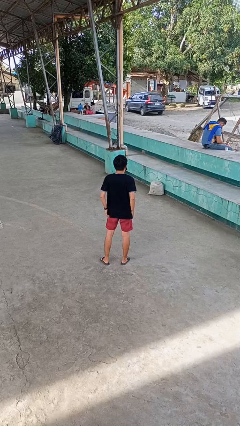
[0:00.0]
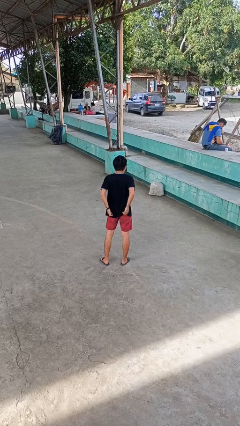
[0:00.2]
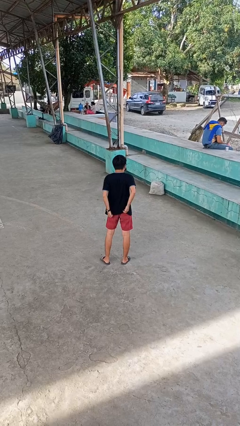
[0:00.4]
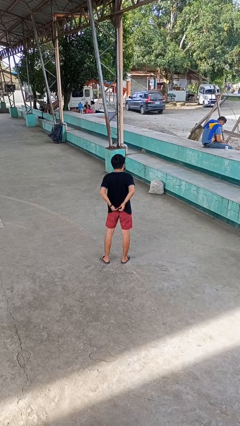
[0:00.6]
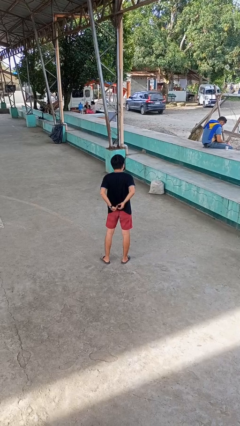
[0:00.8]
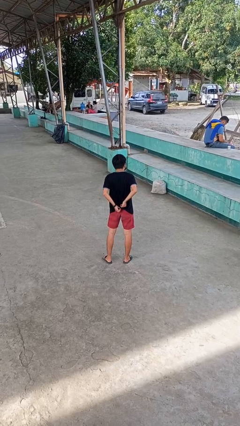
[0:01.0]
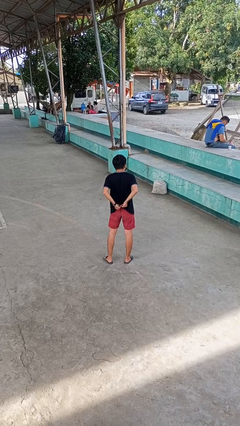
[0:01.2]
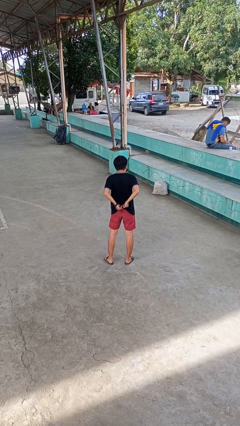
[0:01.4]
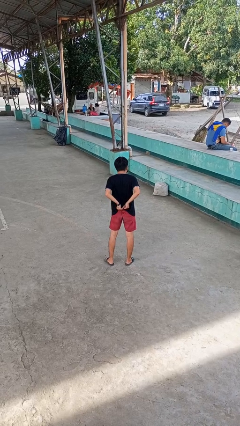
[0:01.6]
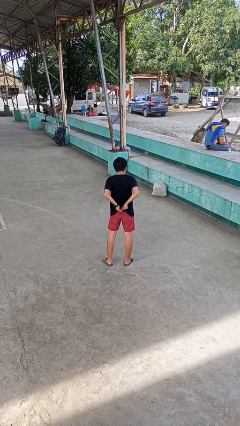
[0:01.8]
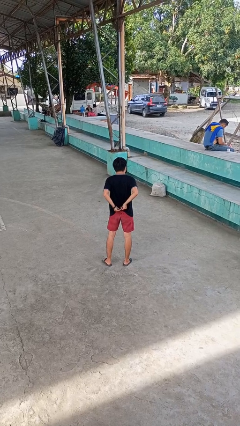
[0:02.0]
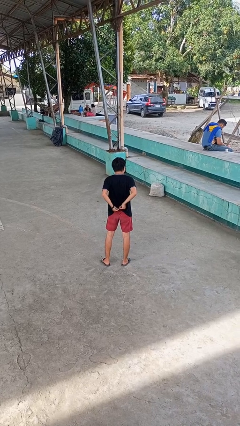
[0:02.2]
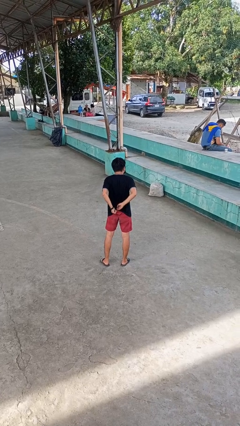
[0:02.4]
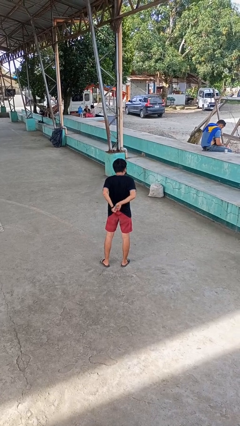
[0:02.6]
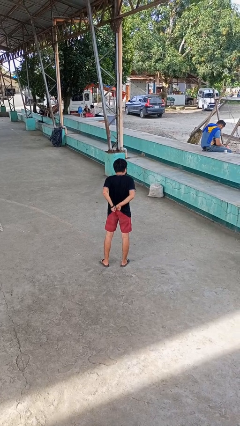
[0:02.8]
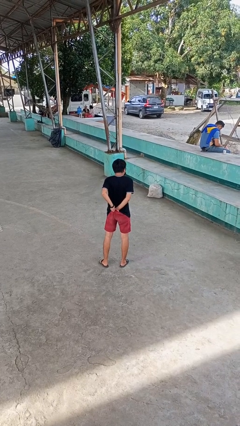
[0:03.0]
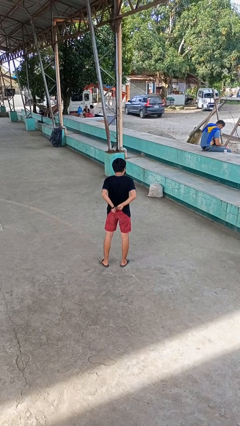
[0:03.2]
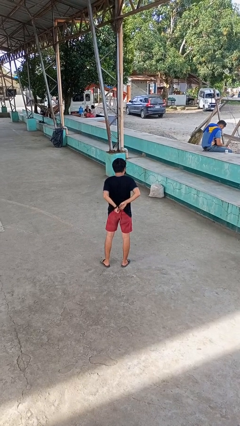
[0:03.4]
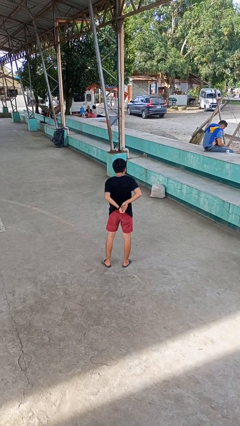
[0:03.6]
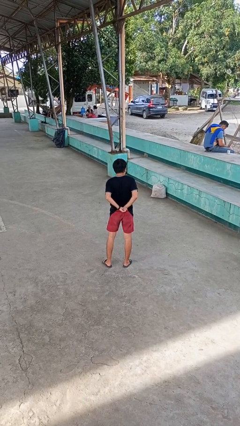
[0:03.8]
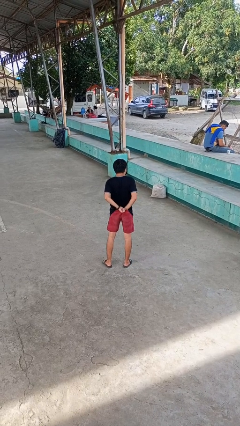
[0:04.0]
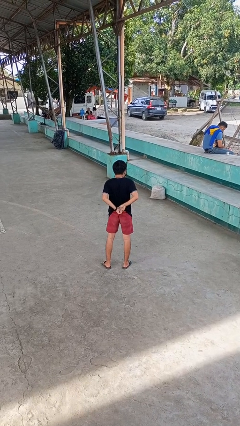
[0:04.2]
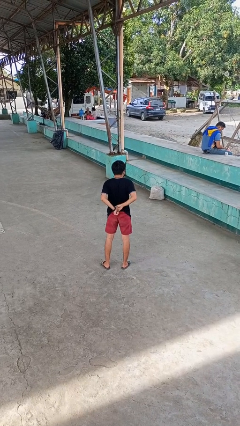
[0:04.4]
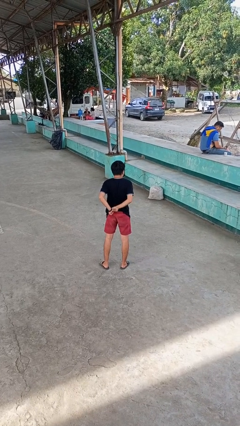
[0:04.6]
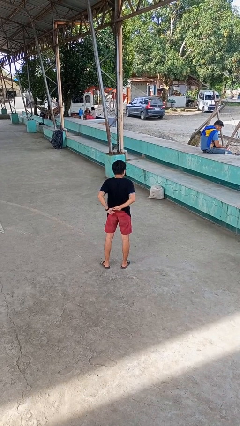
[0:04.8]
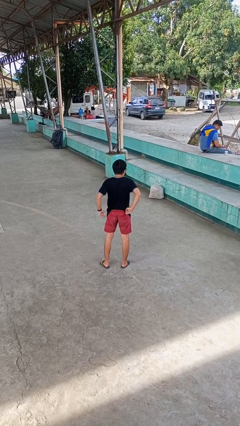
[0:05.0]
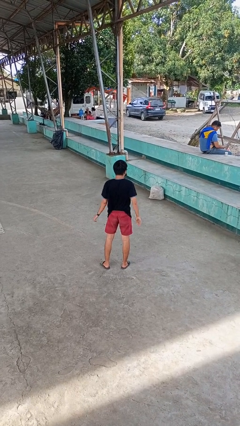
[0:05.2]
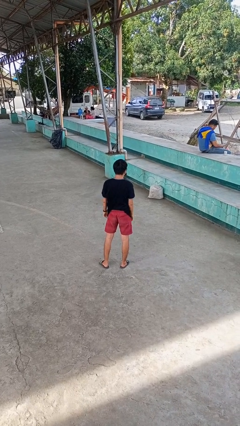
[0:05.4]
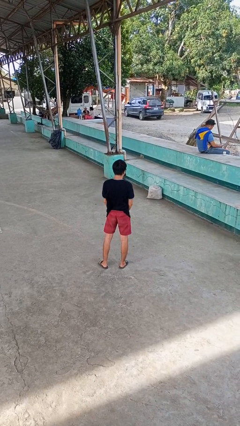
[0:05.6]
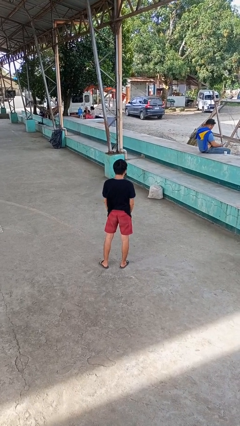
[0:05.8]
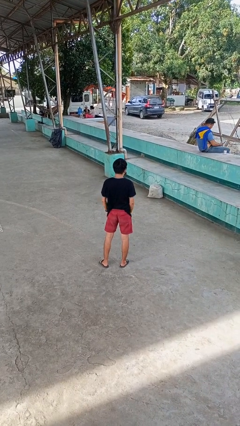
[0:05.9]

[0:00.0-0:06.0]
person tucks in shirt

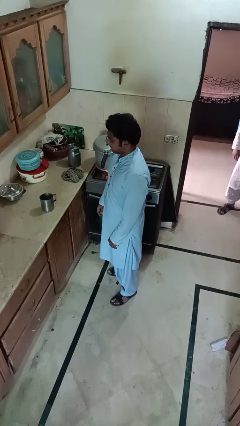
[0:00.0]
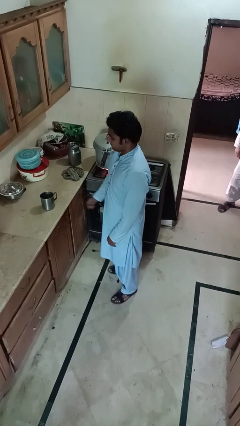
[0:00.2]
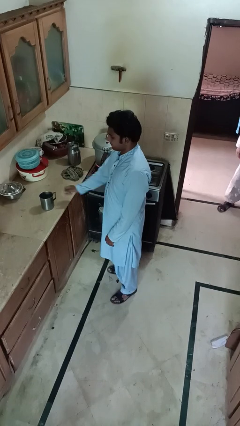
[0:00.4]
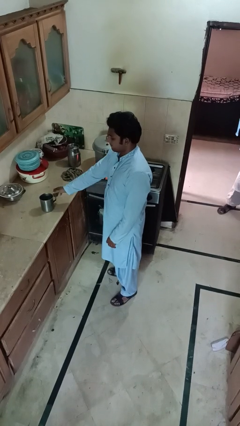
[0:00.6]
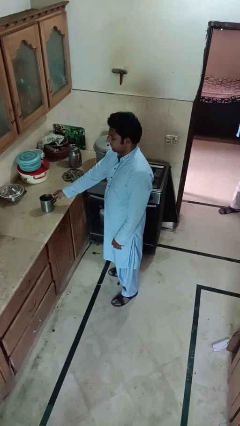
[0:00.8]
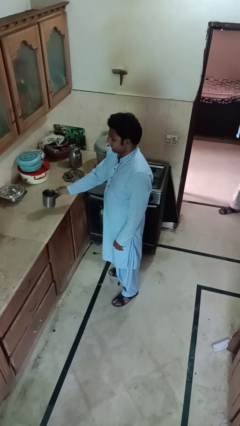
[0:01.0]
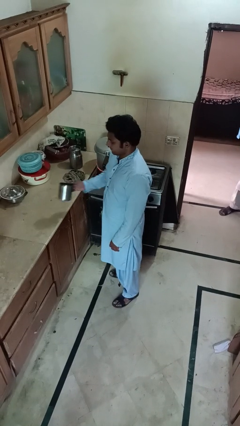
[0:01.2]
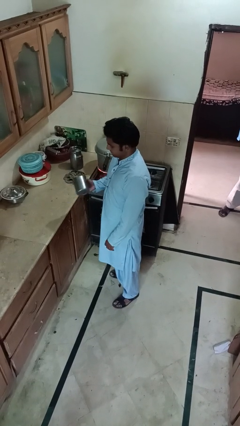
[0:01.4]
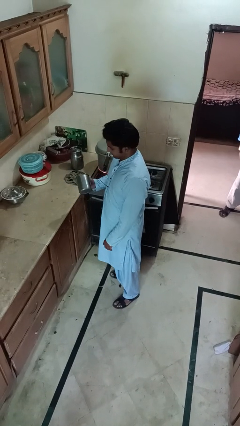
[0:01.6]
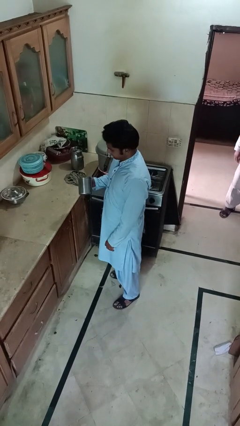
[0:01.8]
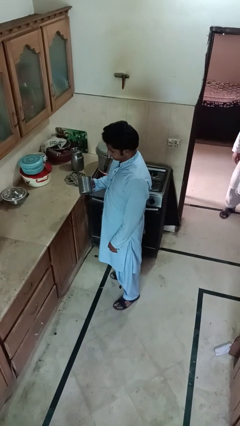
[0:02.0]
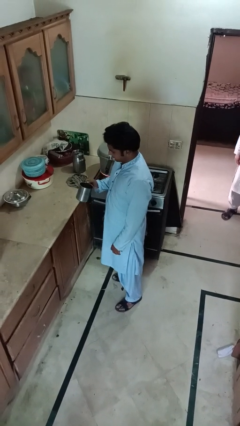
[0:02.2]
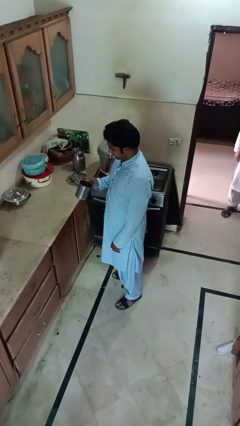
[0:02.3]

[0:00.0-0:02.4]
person picks up object from countertop

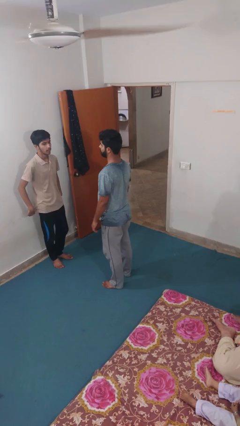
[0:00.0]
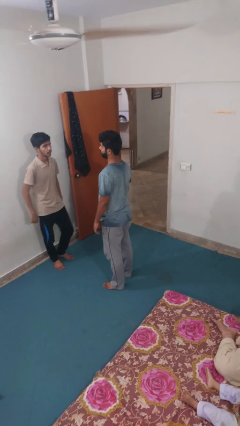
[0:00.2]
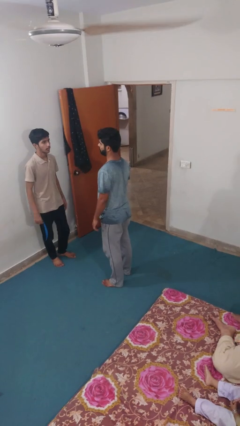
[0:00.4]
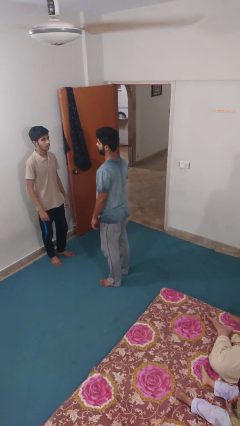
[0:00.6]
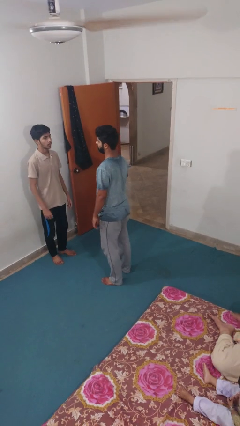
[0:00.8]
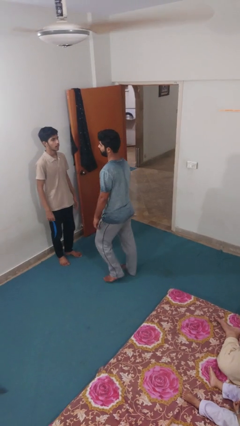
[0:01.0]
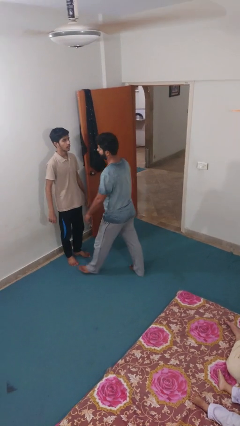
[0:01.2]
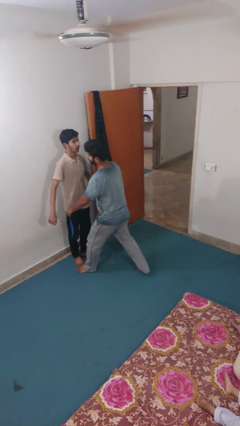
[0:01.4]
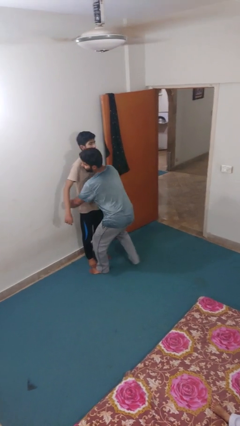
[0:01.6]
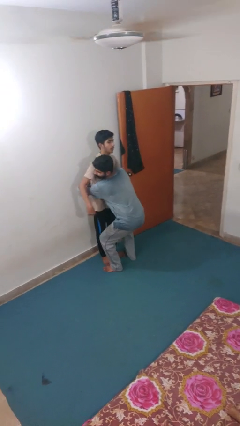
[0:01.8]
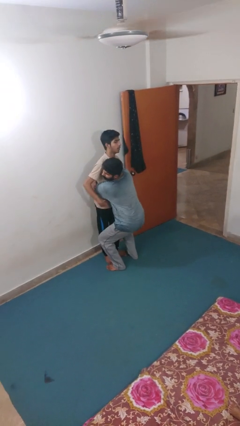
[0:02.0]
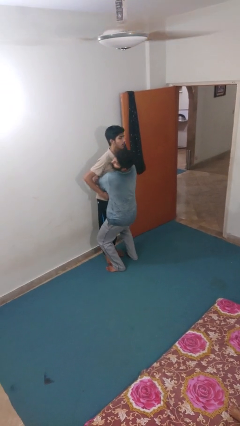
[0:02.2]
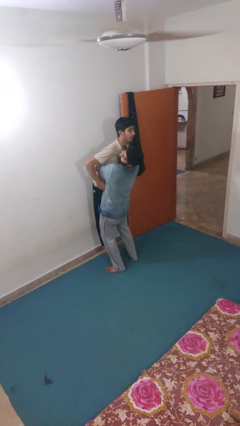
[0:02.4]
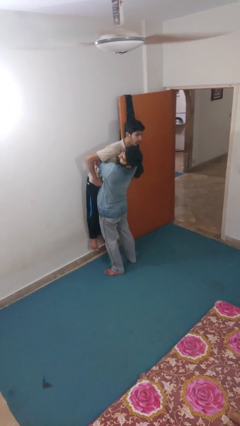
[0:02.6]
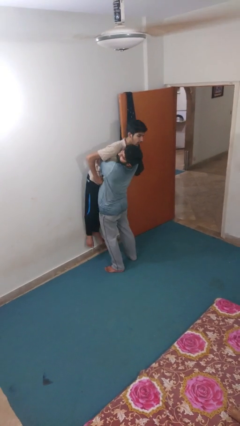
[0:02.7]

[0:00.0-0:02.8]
person picks up person

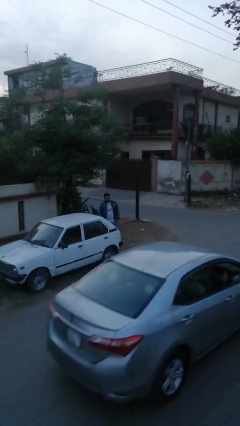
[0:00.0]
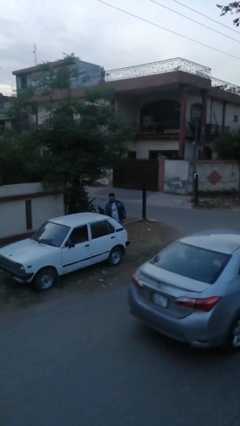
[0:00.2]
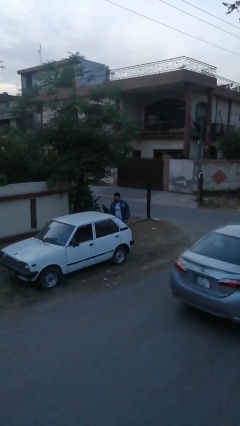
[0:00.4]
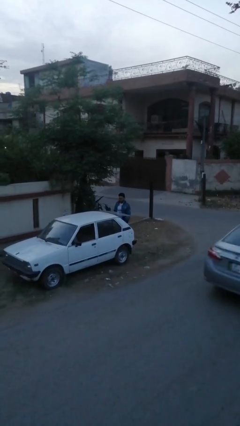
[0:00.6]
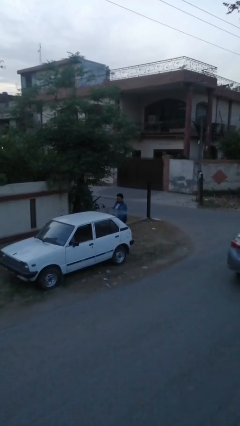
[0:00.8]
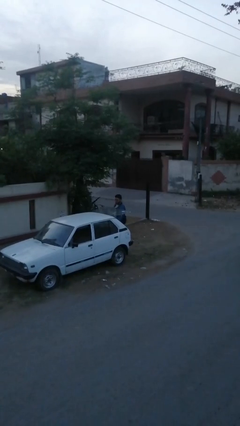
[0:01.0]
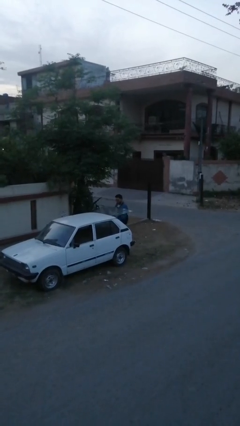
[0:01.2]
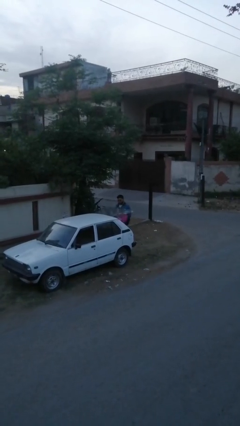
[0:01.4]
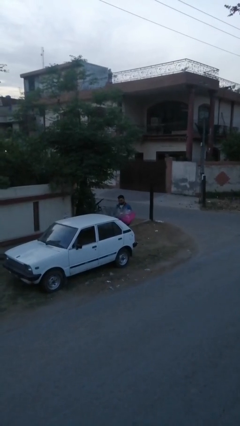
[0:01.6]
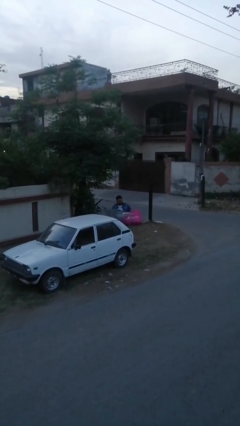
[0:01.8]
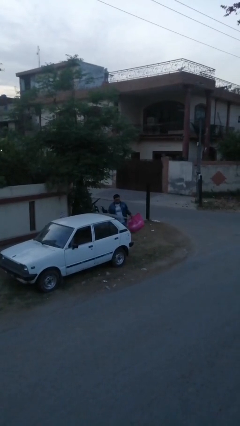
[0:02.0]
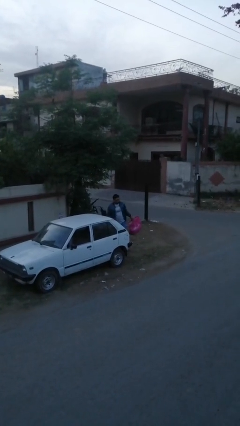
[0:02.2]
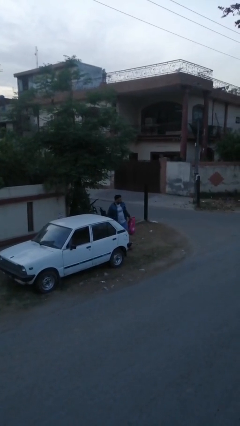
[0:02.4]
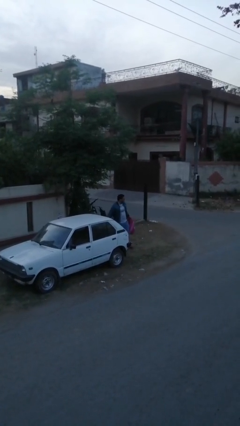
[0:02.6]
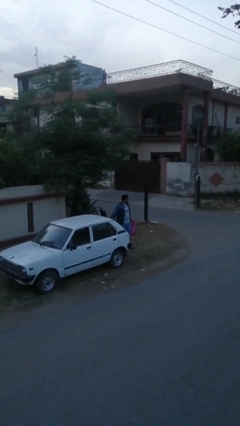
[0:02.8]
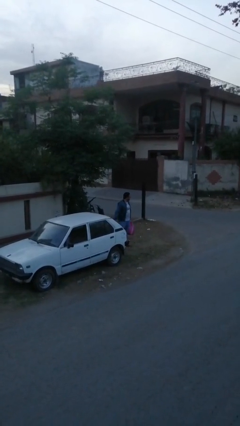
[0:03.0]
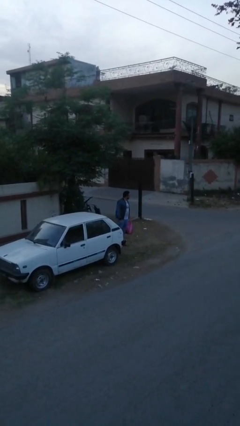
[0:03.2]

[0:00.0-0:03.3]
person unloads car

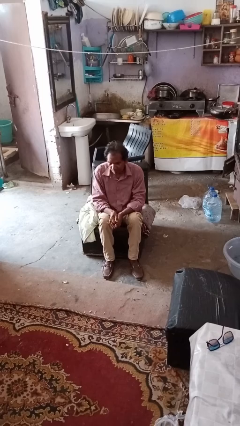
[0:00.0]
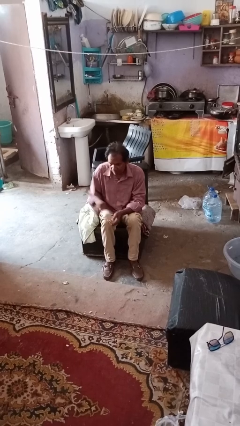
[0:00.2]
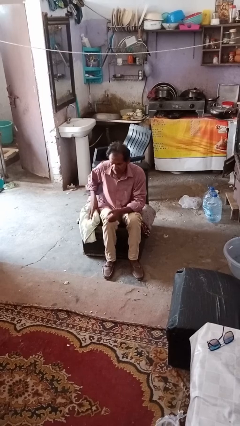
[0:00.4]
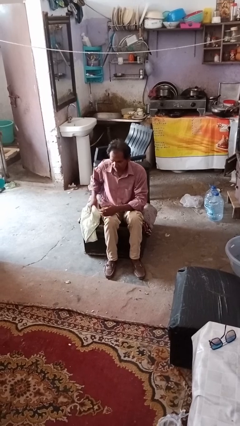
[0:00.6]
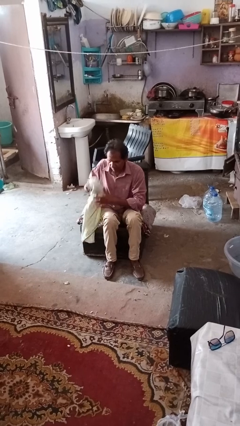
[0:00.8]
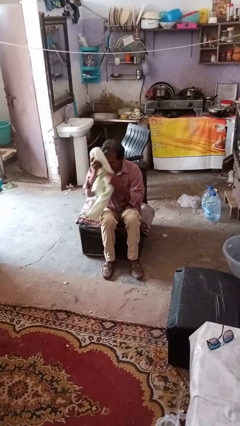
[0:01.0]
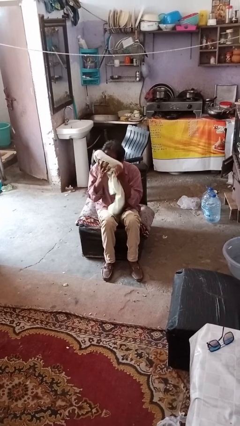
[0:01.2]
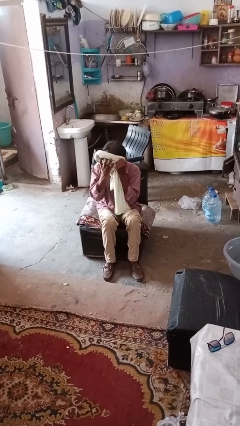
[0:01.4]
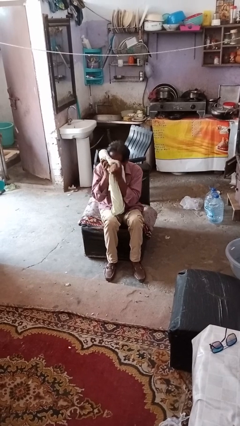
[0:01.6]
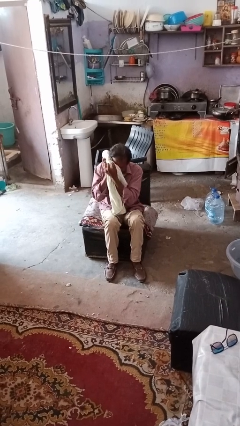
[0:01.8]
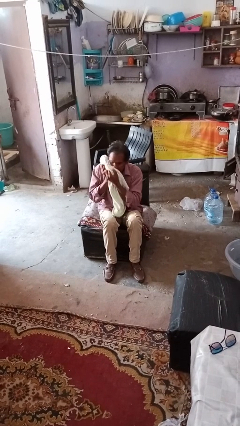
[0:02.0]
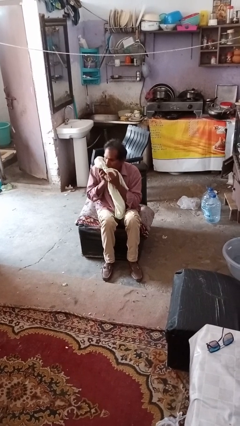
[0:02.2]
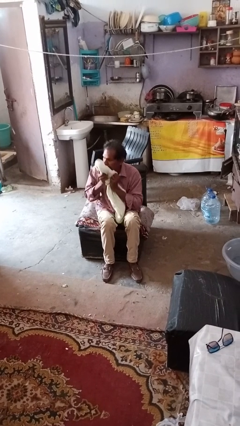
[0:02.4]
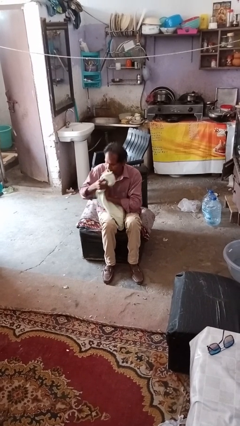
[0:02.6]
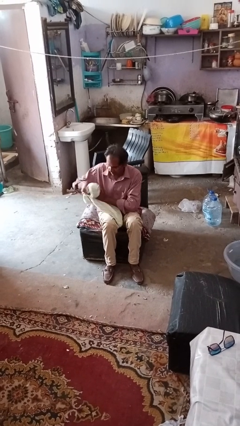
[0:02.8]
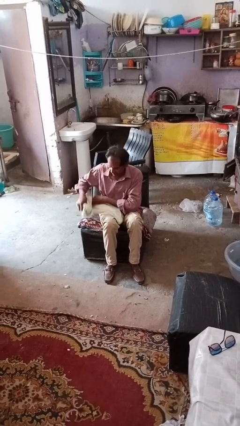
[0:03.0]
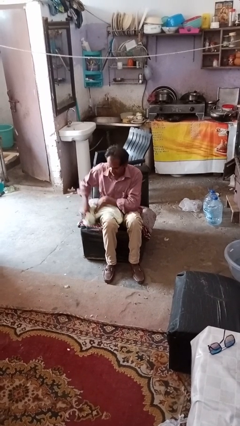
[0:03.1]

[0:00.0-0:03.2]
person wipes mouth with napkin

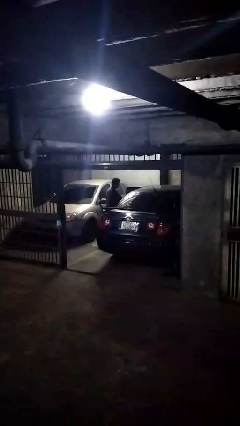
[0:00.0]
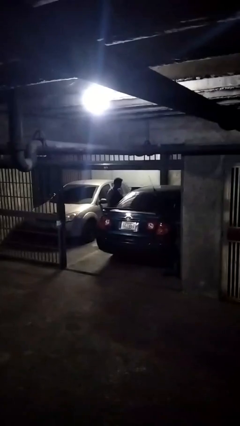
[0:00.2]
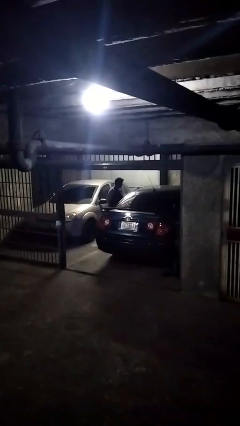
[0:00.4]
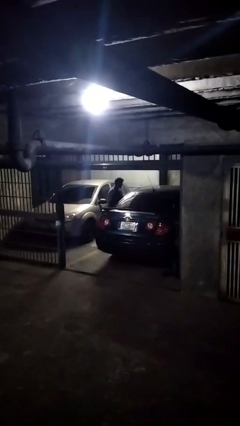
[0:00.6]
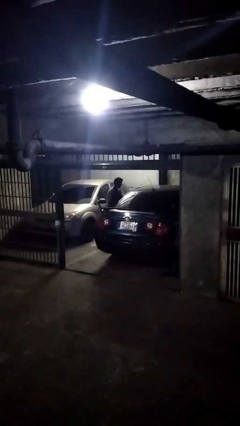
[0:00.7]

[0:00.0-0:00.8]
person closes car door
